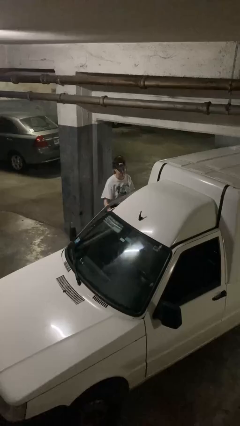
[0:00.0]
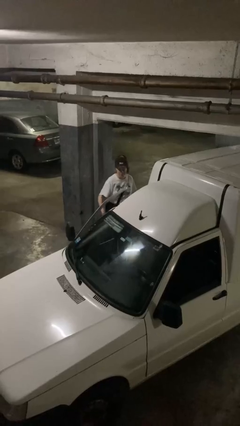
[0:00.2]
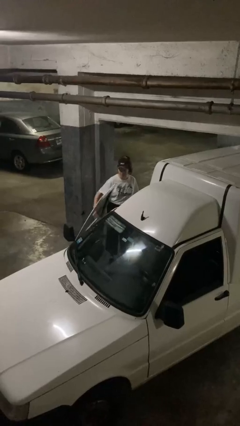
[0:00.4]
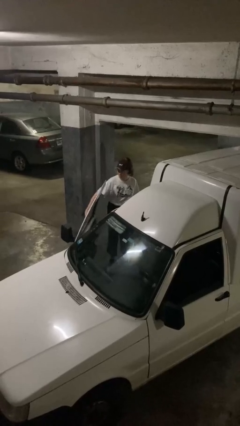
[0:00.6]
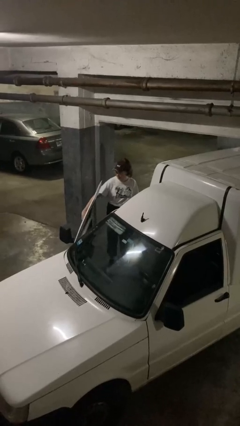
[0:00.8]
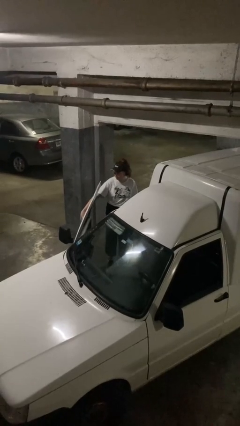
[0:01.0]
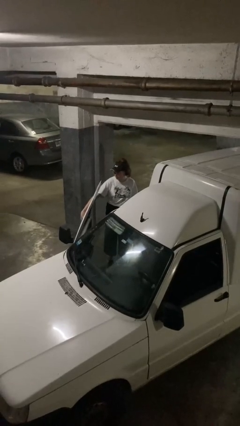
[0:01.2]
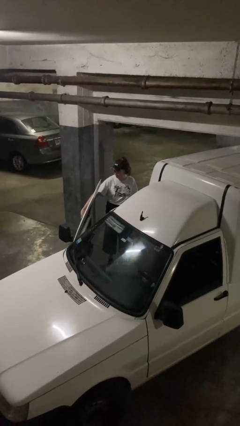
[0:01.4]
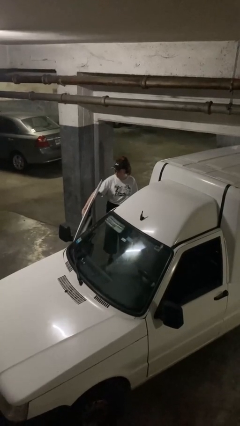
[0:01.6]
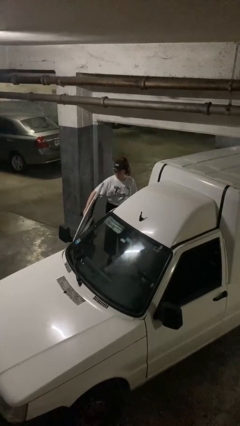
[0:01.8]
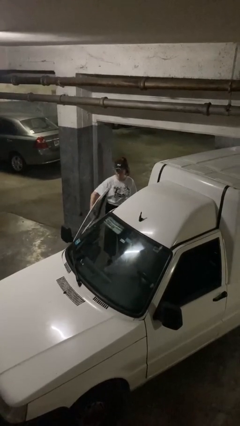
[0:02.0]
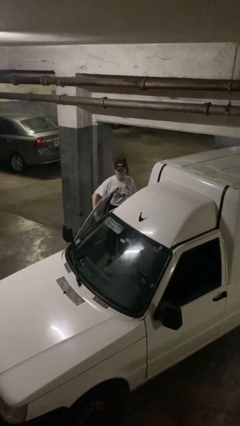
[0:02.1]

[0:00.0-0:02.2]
person opens car door

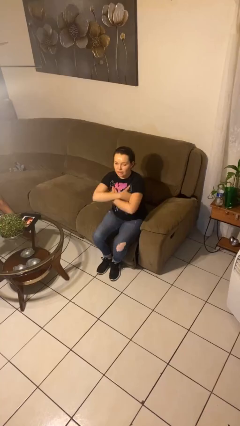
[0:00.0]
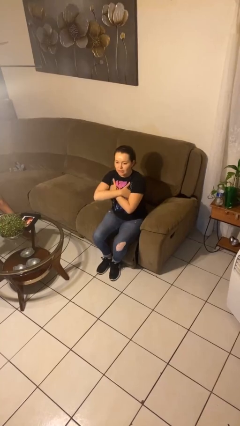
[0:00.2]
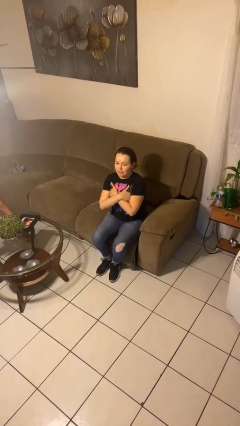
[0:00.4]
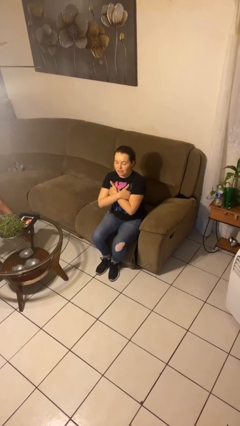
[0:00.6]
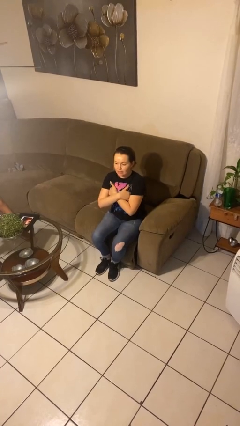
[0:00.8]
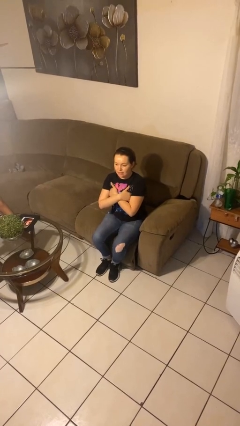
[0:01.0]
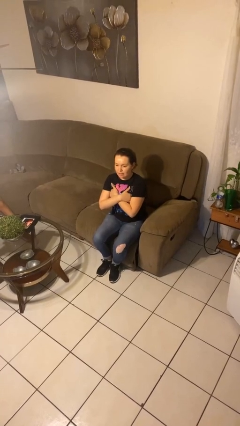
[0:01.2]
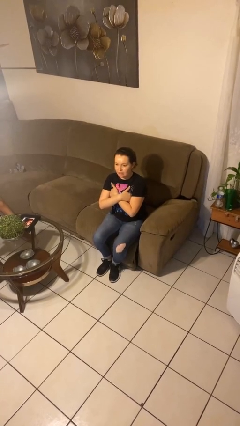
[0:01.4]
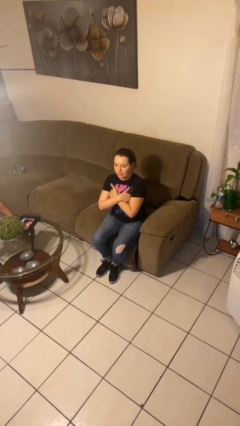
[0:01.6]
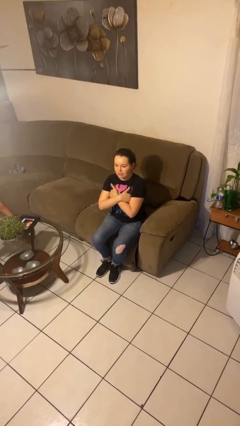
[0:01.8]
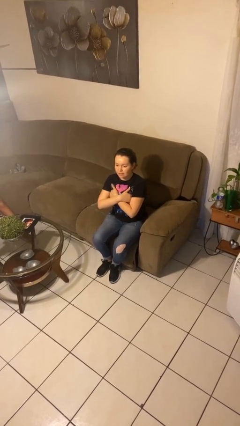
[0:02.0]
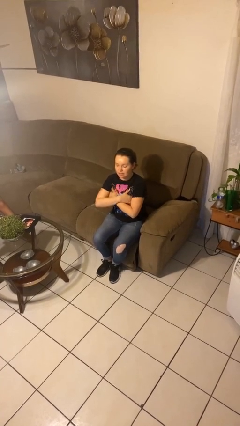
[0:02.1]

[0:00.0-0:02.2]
person gestures arms x

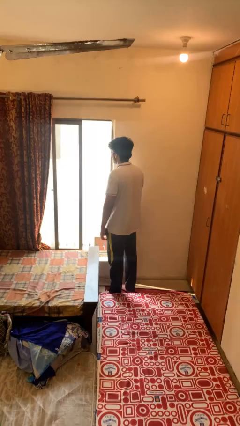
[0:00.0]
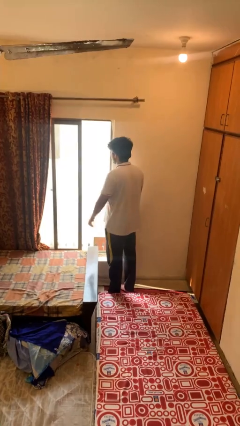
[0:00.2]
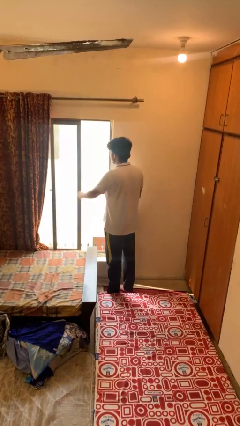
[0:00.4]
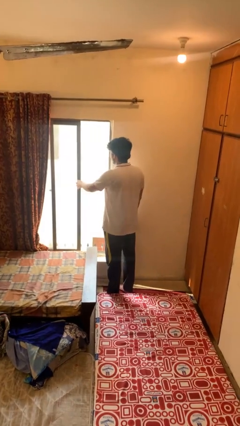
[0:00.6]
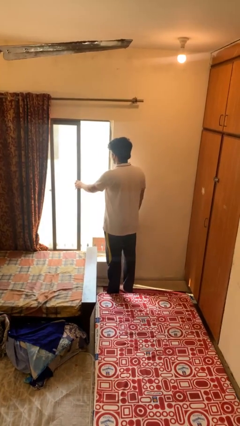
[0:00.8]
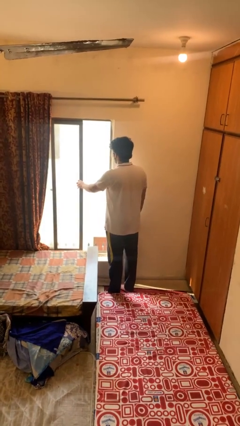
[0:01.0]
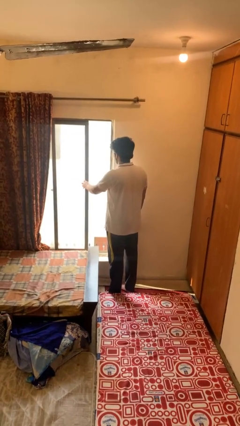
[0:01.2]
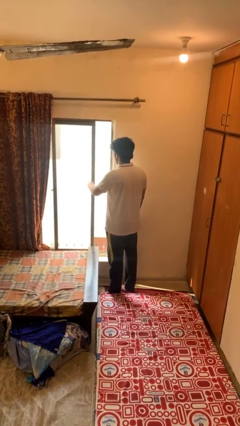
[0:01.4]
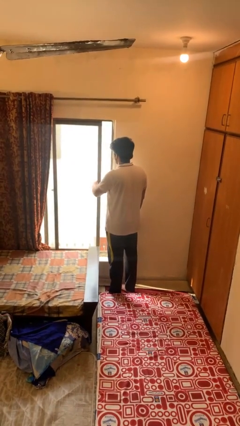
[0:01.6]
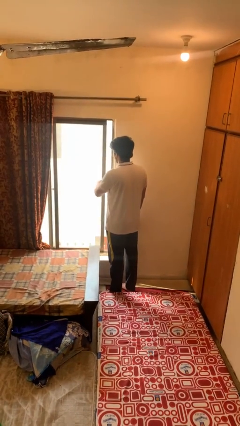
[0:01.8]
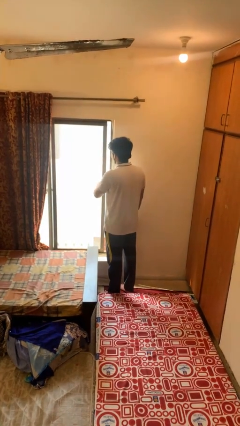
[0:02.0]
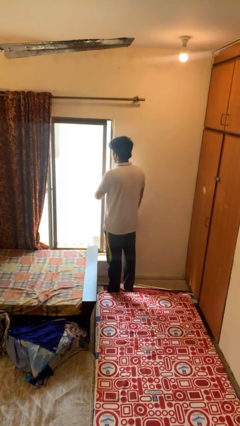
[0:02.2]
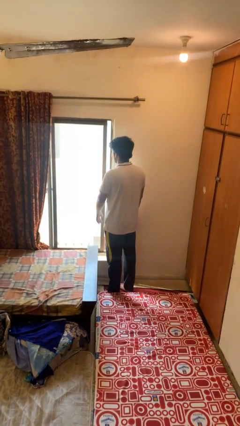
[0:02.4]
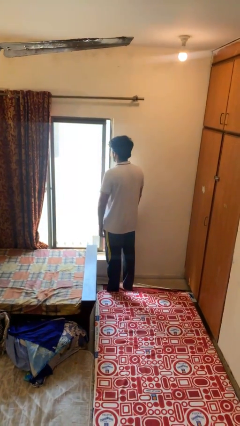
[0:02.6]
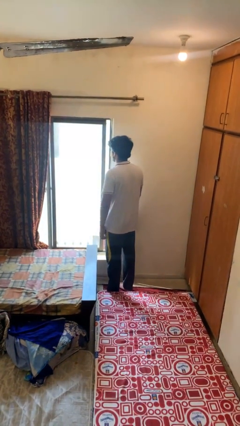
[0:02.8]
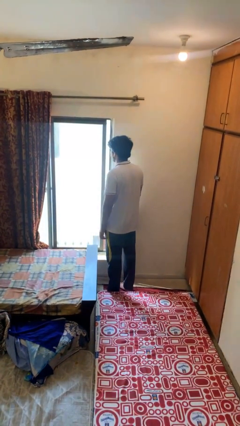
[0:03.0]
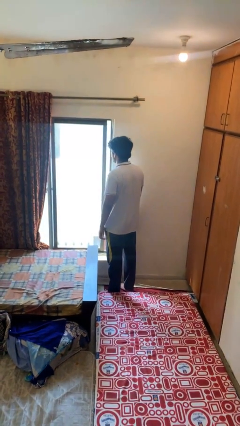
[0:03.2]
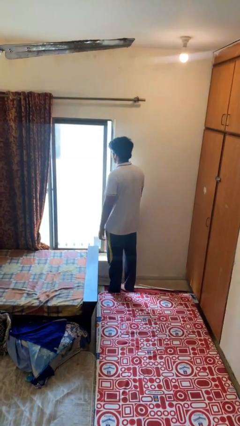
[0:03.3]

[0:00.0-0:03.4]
person closes home window

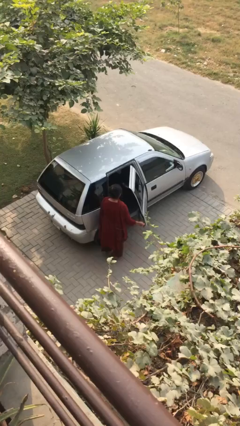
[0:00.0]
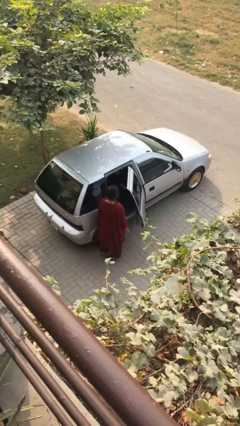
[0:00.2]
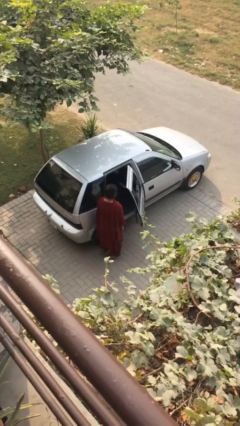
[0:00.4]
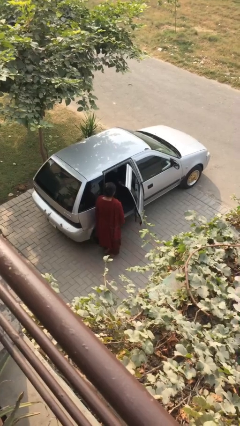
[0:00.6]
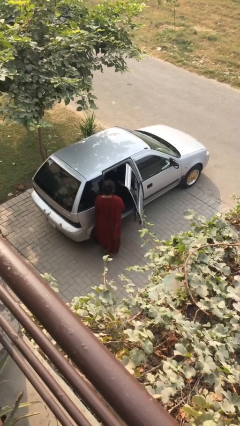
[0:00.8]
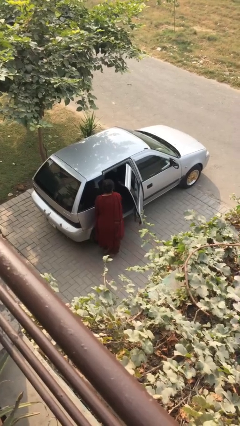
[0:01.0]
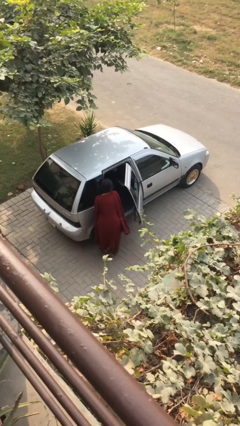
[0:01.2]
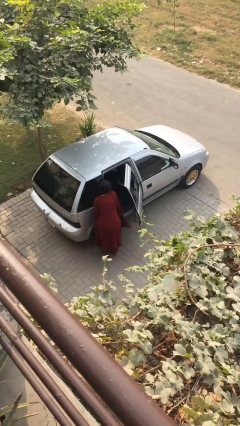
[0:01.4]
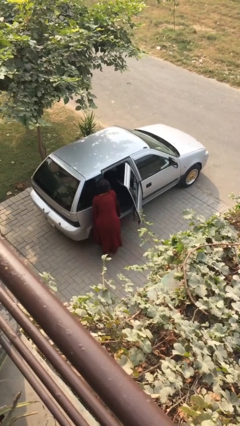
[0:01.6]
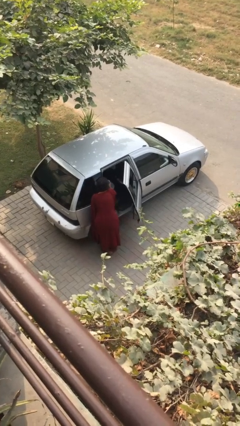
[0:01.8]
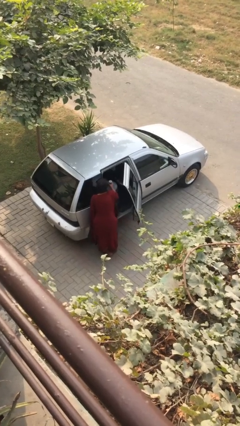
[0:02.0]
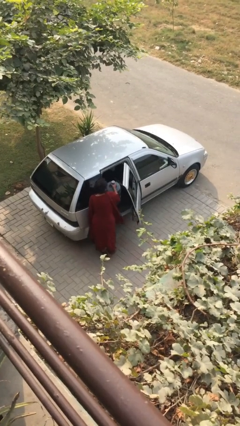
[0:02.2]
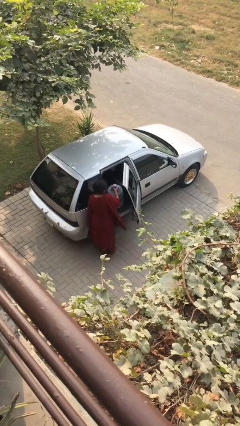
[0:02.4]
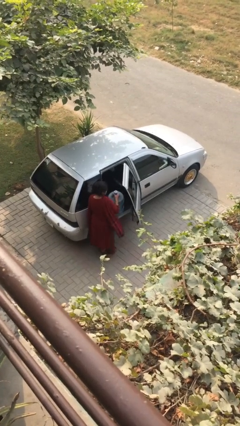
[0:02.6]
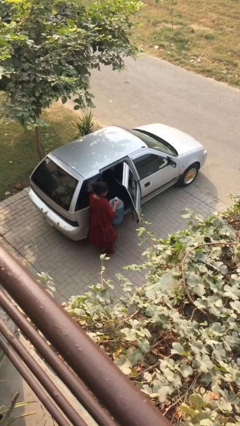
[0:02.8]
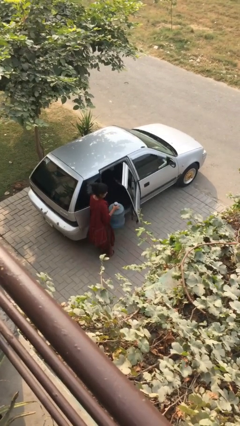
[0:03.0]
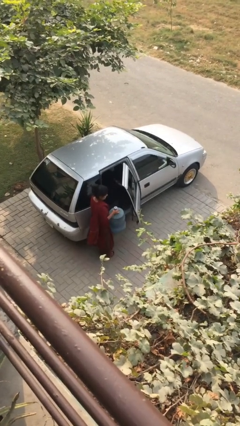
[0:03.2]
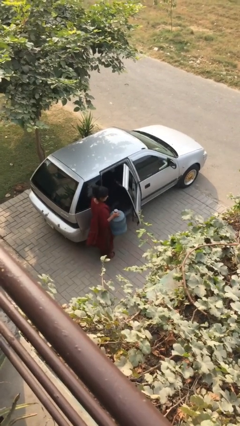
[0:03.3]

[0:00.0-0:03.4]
person unloads car

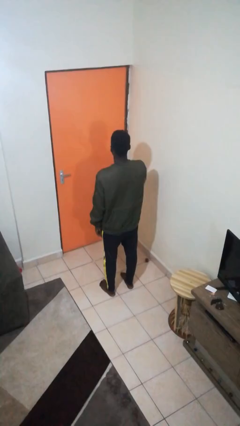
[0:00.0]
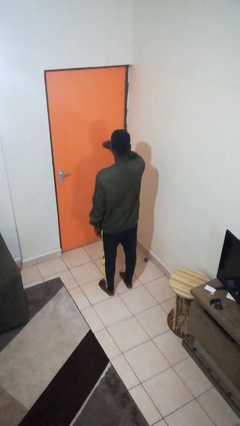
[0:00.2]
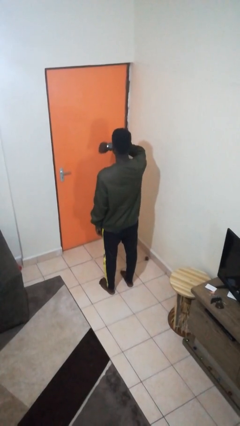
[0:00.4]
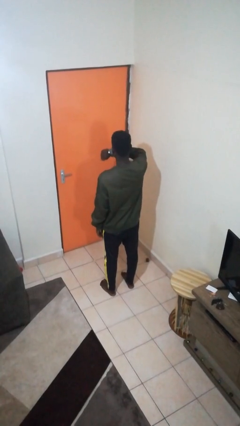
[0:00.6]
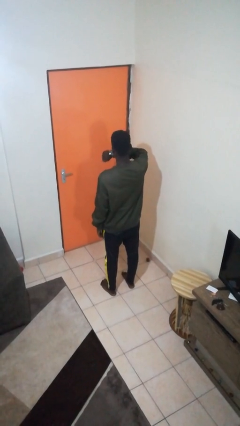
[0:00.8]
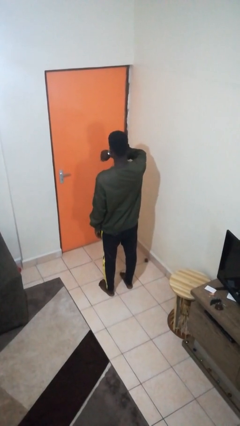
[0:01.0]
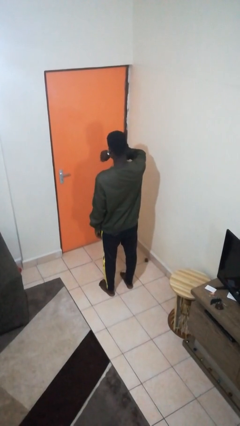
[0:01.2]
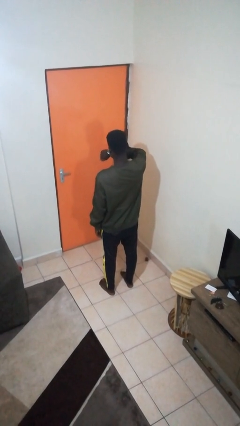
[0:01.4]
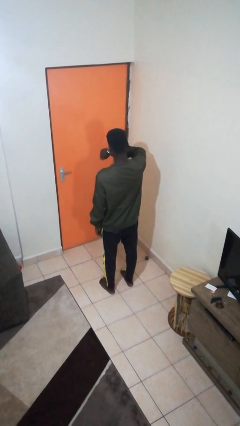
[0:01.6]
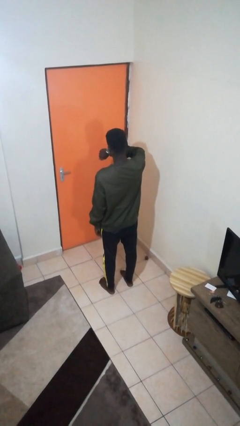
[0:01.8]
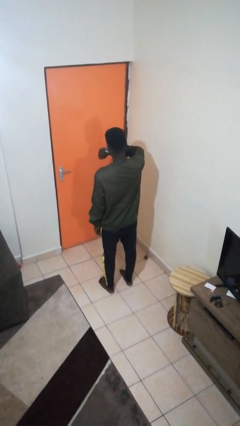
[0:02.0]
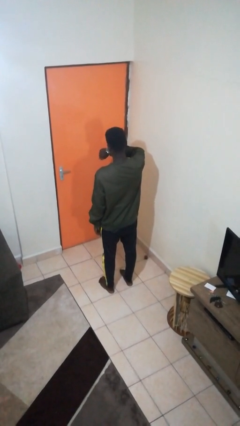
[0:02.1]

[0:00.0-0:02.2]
person looks at wristwatch

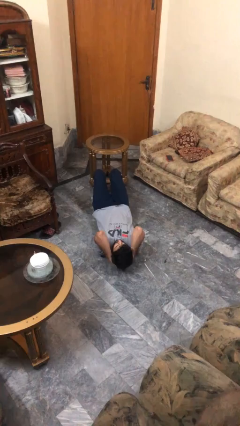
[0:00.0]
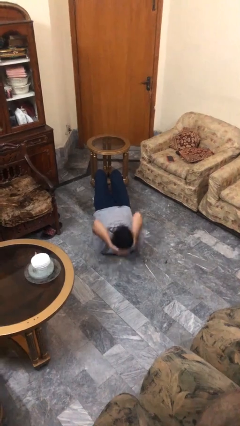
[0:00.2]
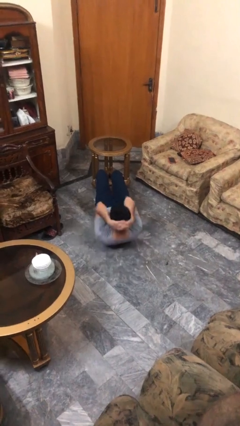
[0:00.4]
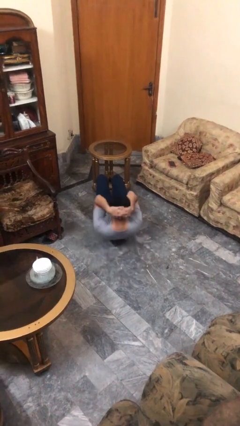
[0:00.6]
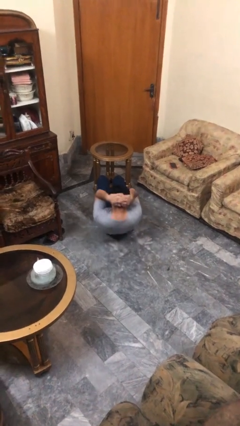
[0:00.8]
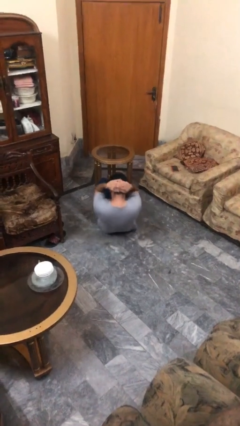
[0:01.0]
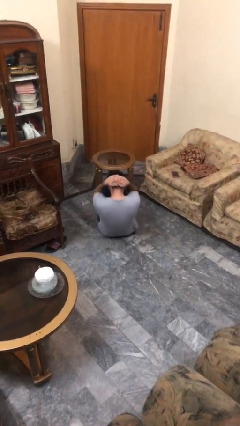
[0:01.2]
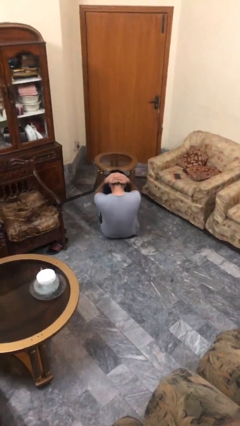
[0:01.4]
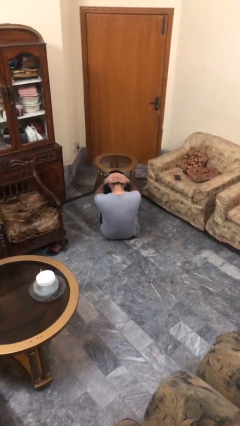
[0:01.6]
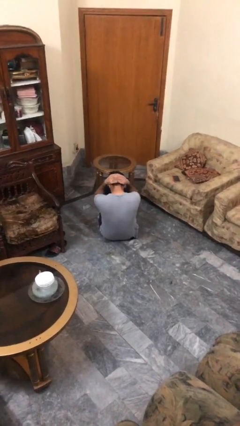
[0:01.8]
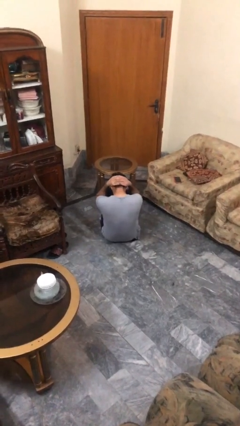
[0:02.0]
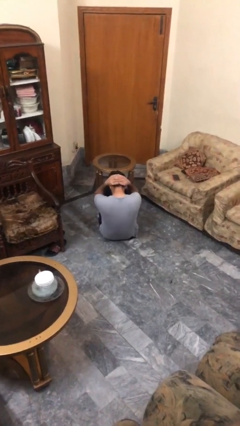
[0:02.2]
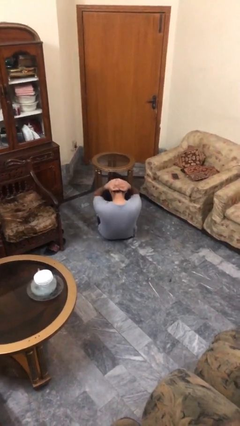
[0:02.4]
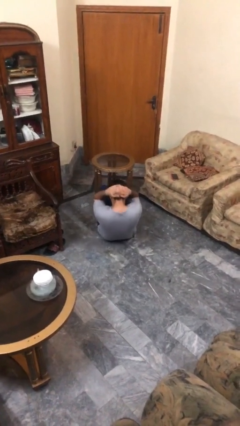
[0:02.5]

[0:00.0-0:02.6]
person exercises with situp

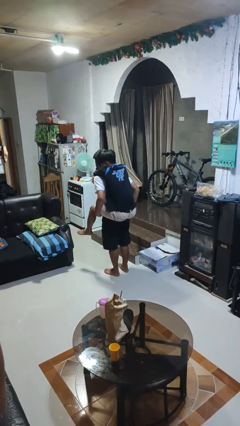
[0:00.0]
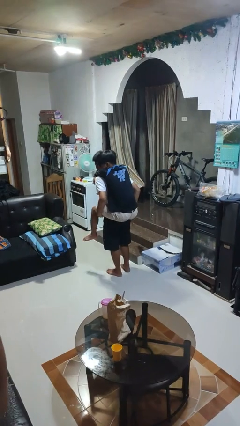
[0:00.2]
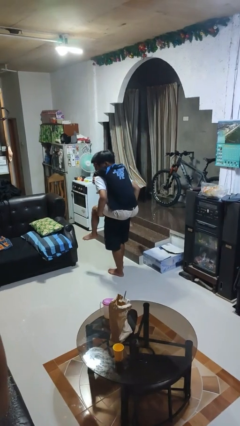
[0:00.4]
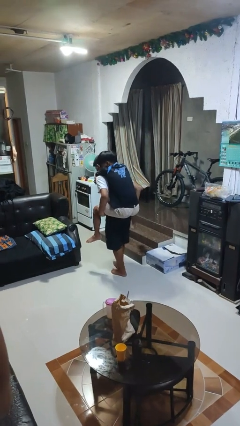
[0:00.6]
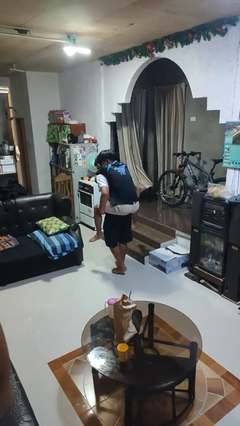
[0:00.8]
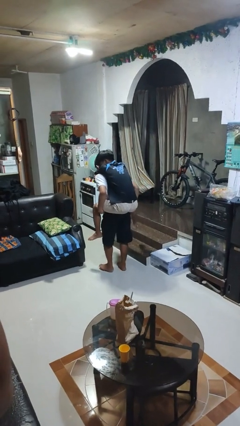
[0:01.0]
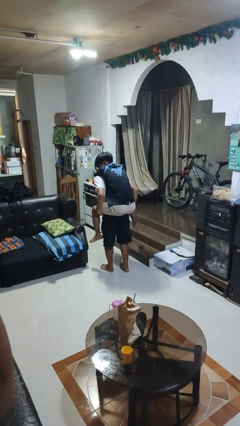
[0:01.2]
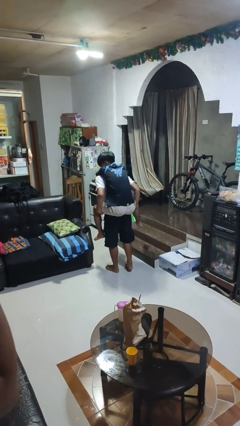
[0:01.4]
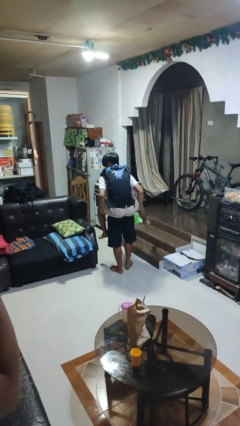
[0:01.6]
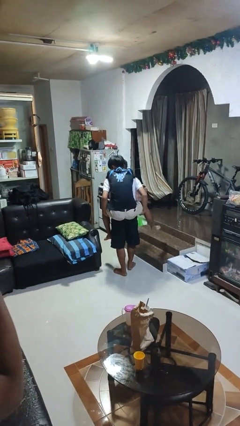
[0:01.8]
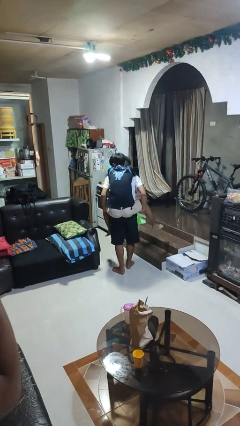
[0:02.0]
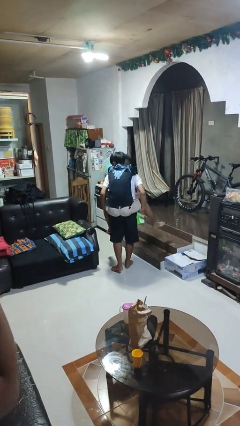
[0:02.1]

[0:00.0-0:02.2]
person carries person on back
